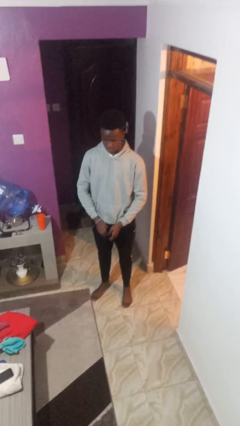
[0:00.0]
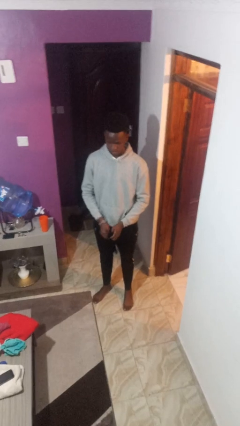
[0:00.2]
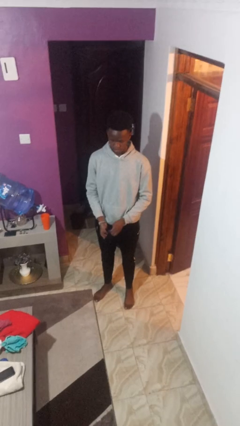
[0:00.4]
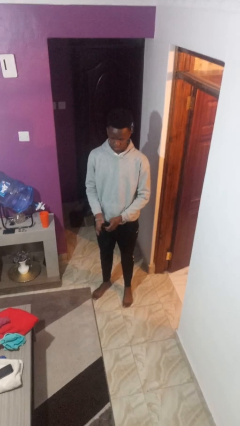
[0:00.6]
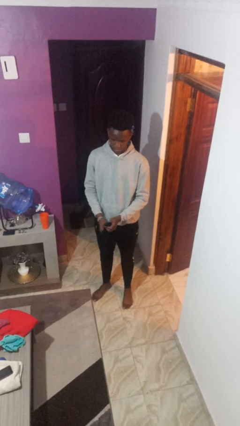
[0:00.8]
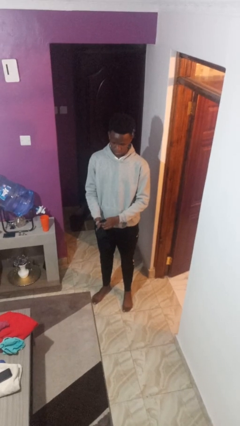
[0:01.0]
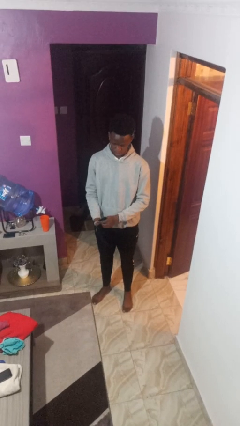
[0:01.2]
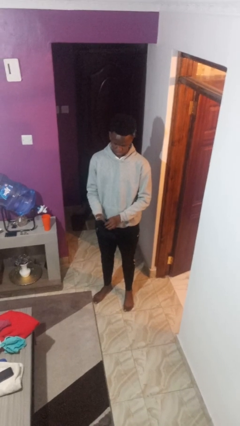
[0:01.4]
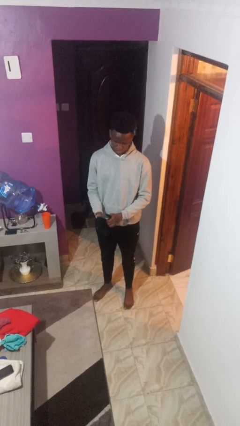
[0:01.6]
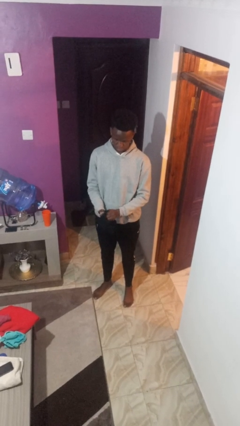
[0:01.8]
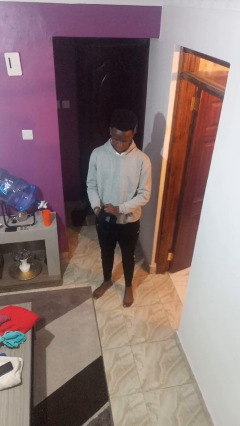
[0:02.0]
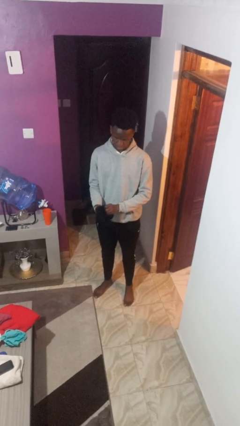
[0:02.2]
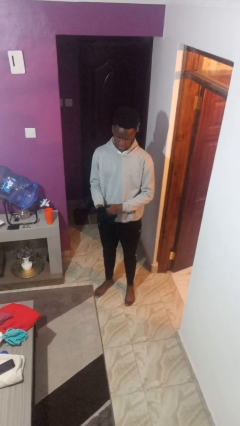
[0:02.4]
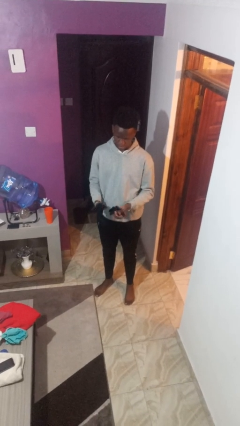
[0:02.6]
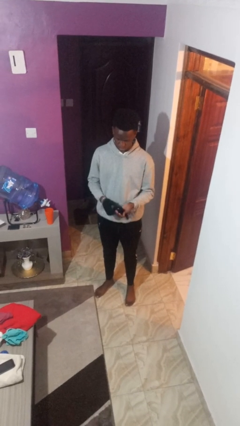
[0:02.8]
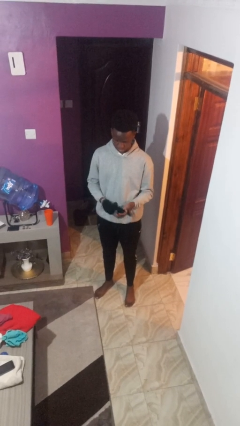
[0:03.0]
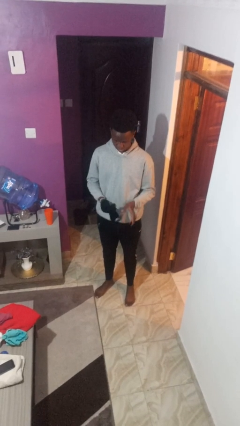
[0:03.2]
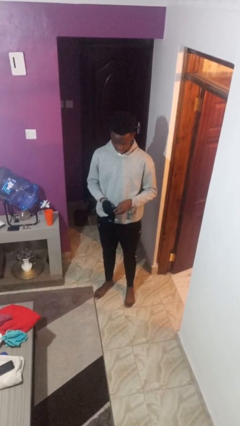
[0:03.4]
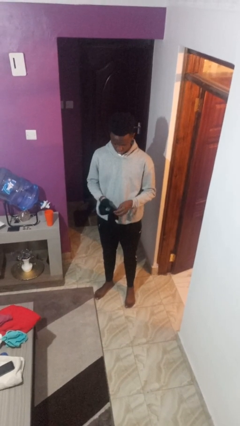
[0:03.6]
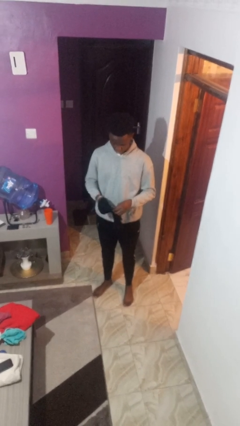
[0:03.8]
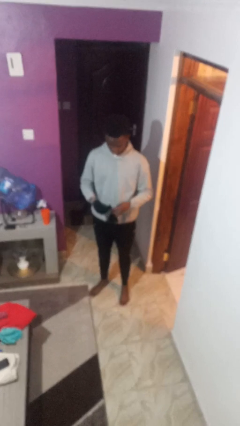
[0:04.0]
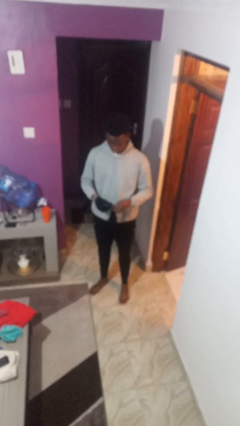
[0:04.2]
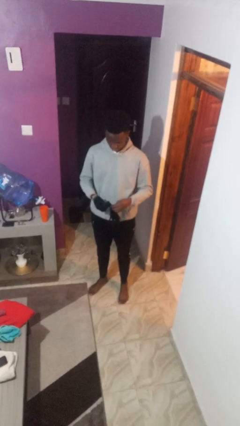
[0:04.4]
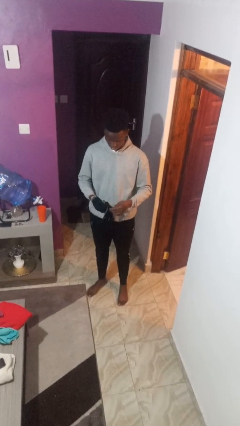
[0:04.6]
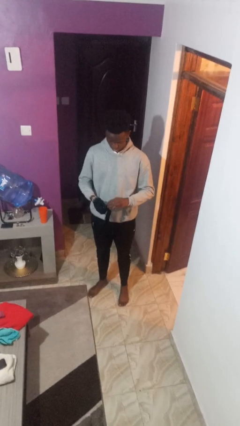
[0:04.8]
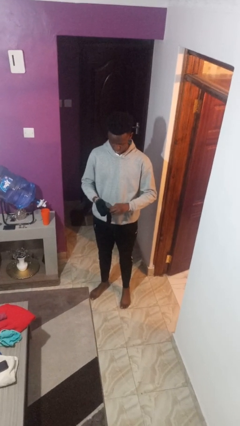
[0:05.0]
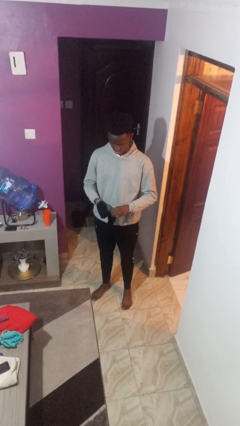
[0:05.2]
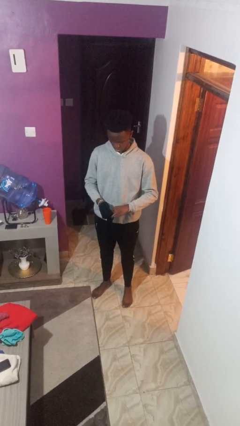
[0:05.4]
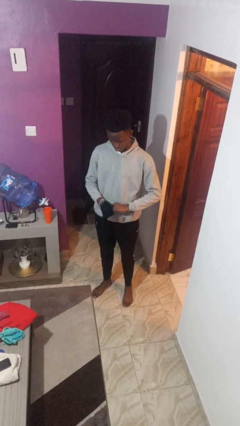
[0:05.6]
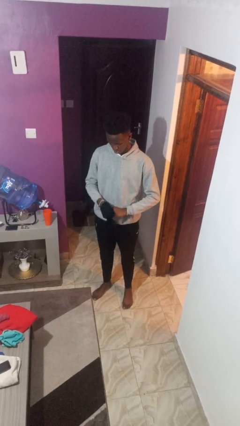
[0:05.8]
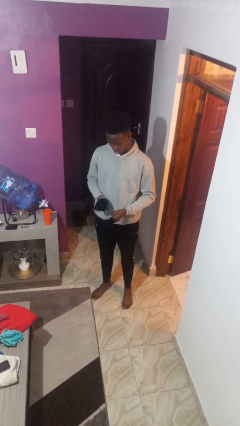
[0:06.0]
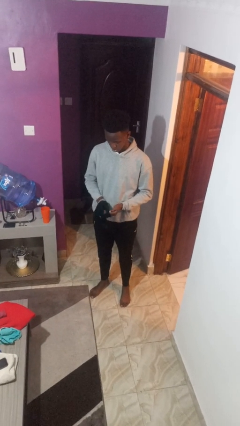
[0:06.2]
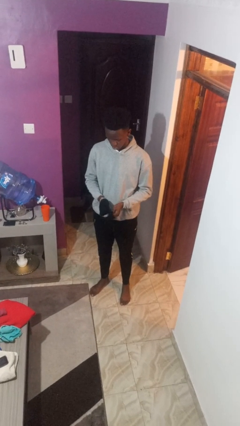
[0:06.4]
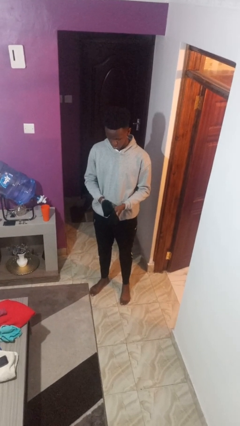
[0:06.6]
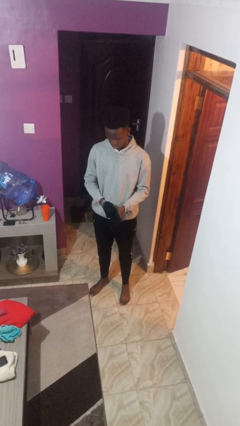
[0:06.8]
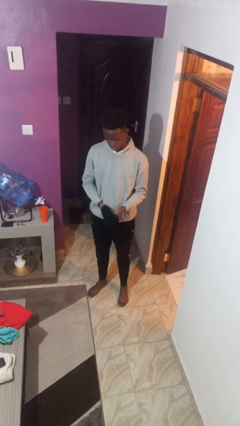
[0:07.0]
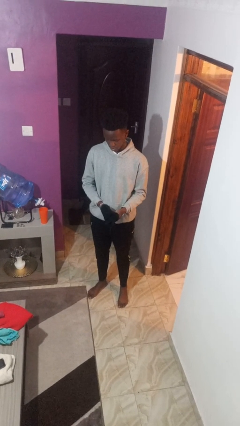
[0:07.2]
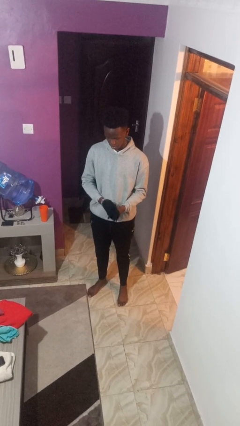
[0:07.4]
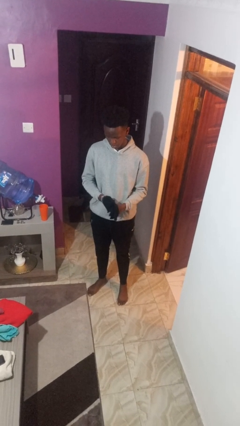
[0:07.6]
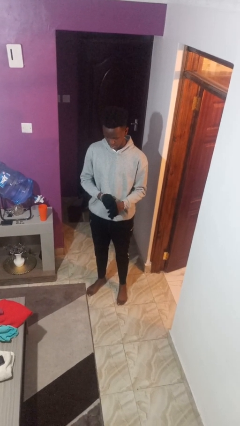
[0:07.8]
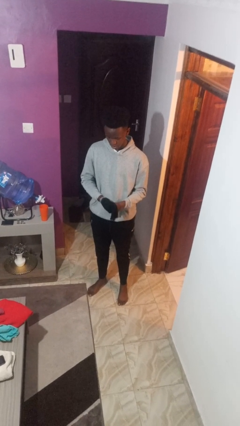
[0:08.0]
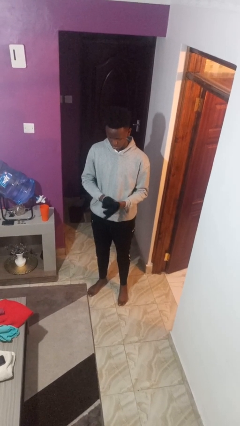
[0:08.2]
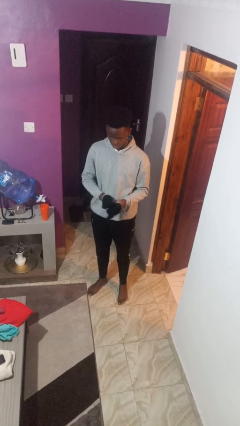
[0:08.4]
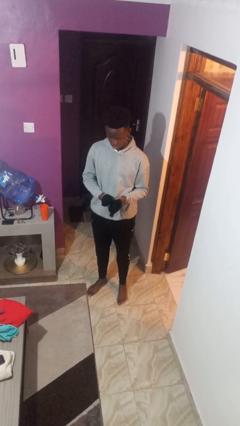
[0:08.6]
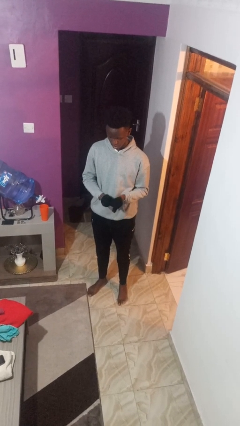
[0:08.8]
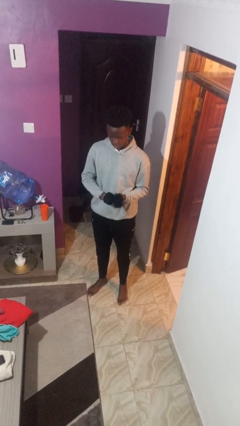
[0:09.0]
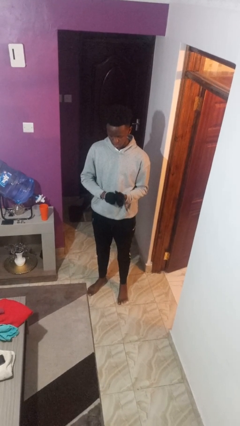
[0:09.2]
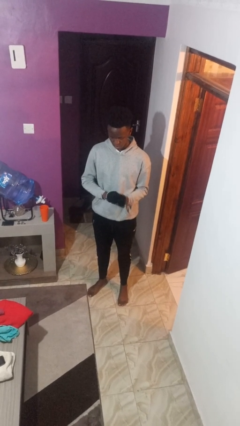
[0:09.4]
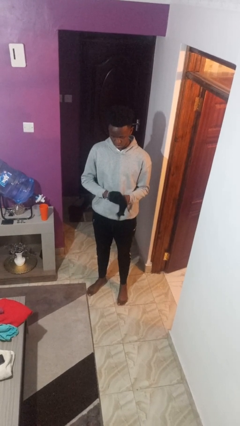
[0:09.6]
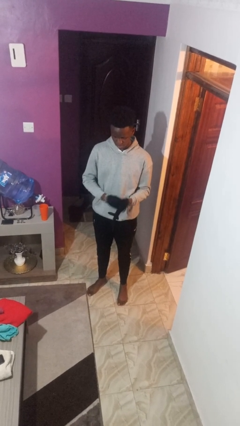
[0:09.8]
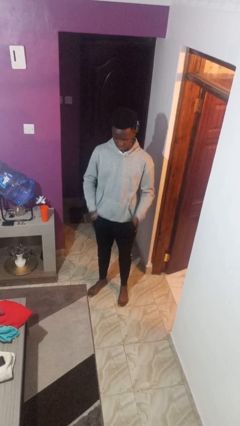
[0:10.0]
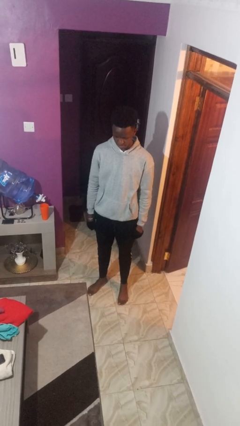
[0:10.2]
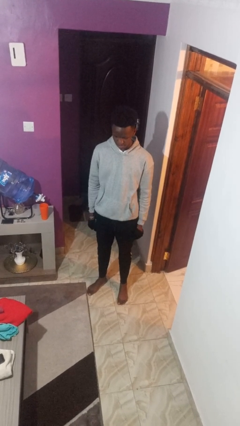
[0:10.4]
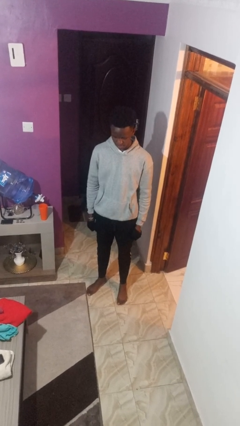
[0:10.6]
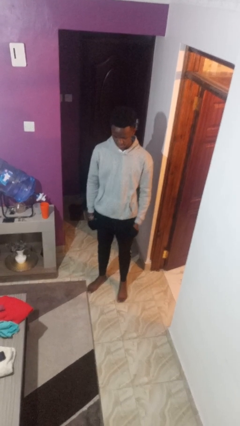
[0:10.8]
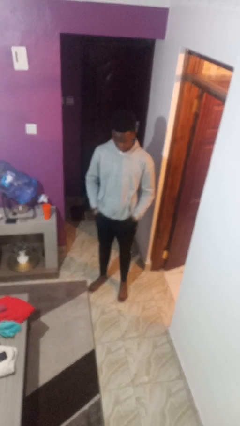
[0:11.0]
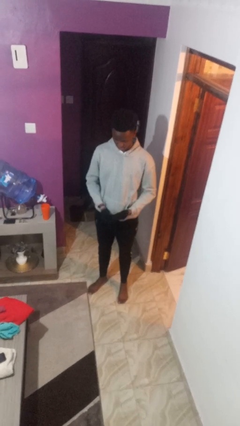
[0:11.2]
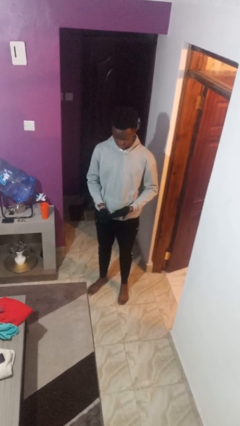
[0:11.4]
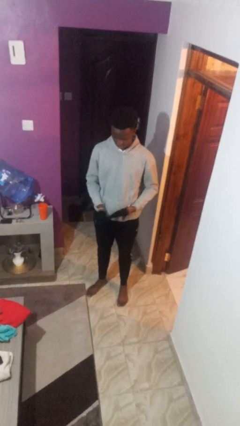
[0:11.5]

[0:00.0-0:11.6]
person puts on gloves

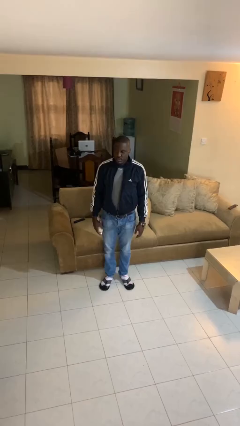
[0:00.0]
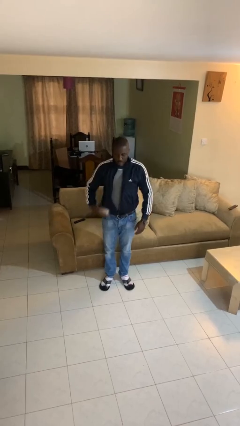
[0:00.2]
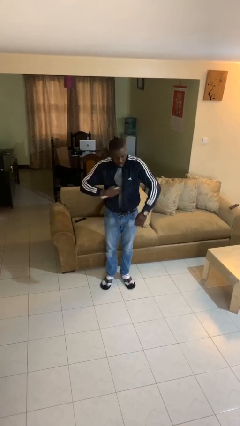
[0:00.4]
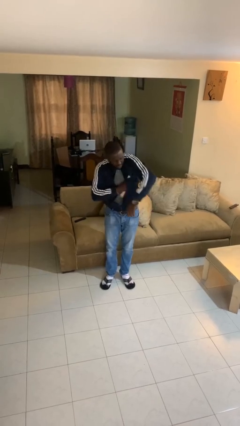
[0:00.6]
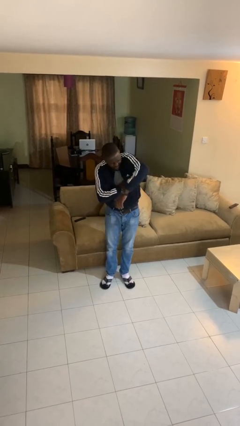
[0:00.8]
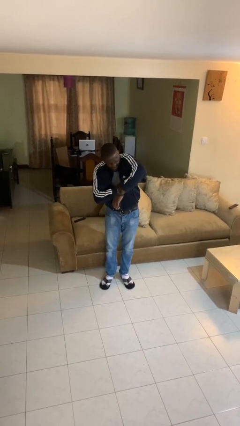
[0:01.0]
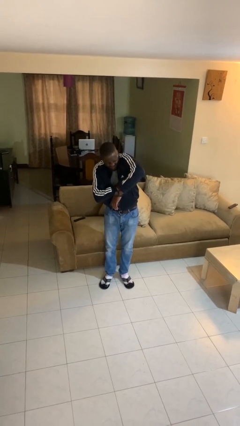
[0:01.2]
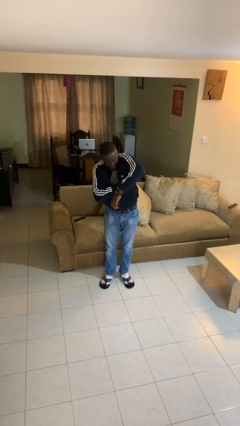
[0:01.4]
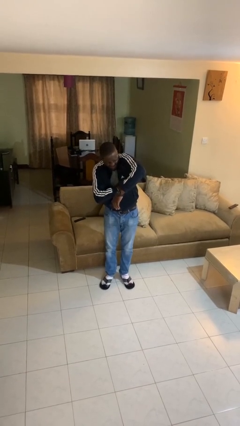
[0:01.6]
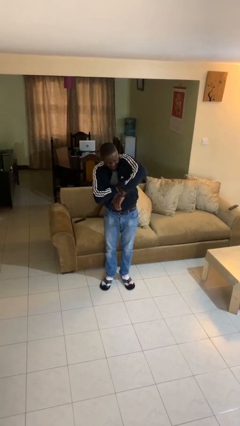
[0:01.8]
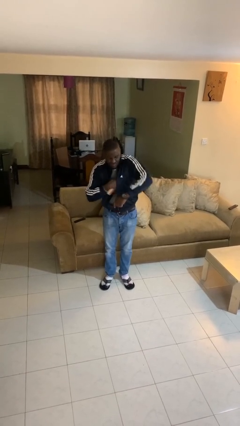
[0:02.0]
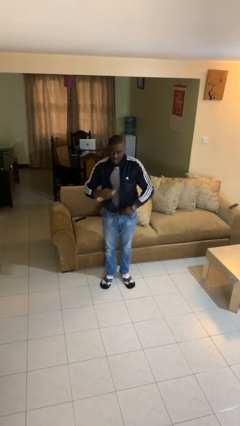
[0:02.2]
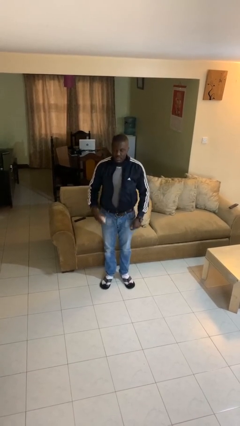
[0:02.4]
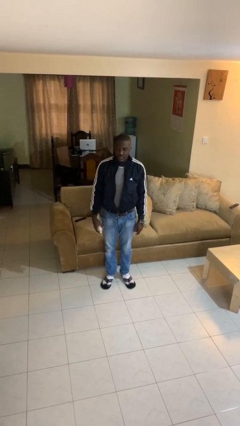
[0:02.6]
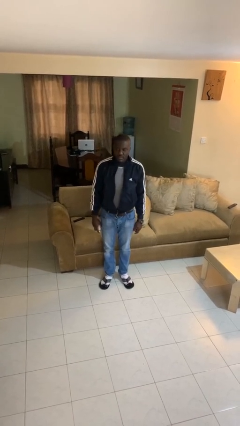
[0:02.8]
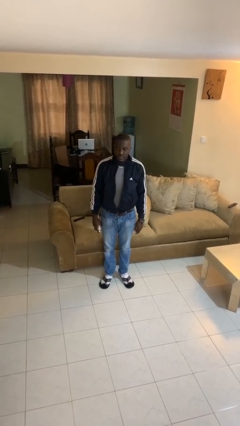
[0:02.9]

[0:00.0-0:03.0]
person applies deodorant

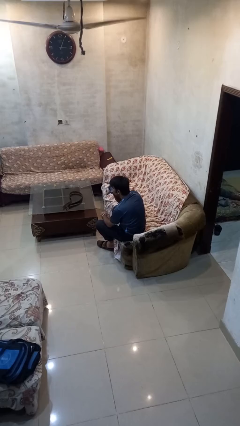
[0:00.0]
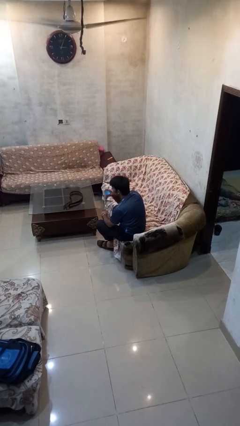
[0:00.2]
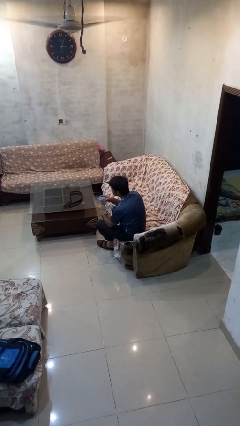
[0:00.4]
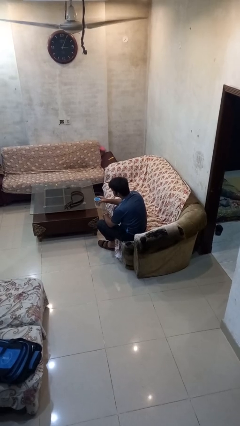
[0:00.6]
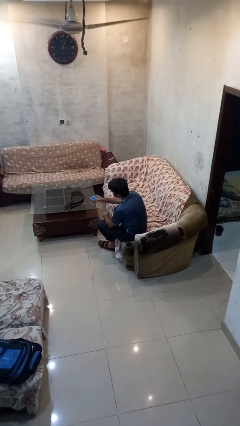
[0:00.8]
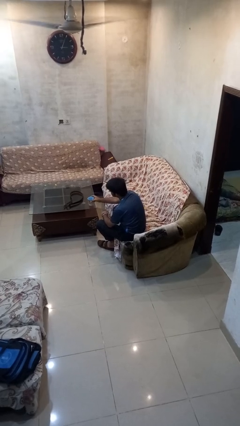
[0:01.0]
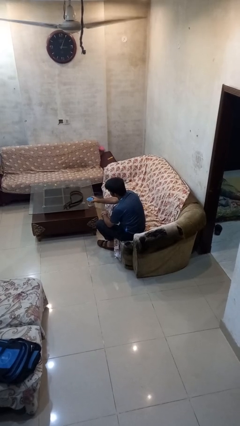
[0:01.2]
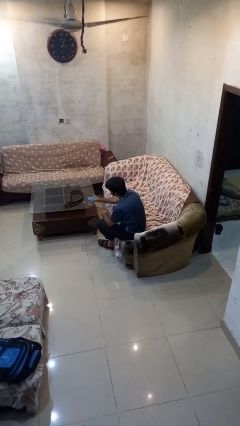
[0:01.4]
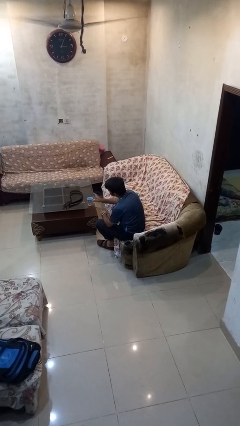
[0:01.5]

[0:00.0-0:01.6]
person puts down object on table

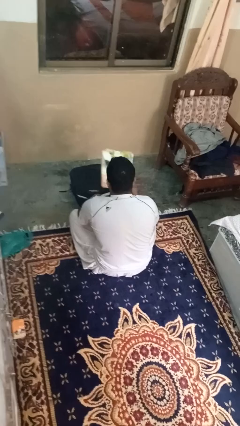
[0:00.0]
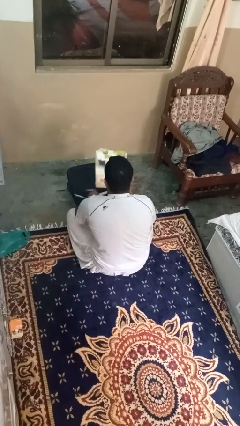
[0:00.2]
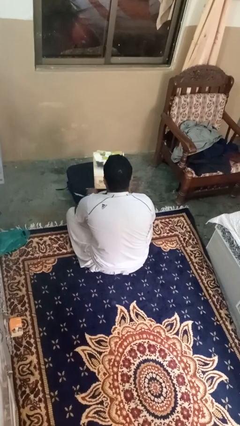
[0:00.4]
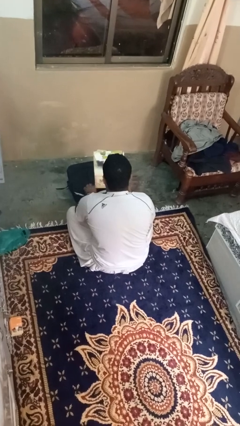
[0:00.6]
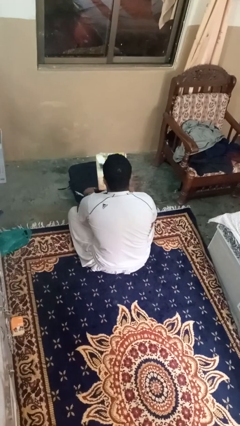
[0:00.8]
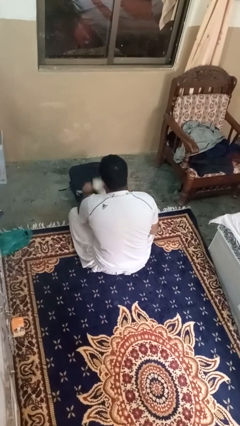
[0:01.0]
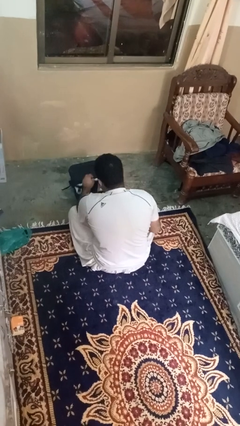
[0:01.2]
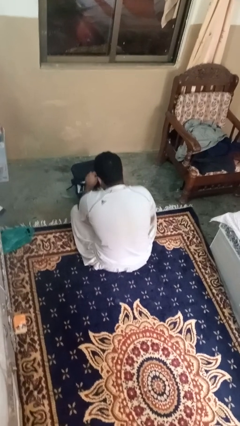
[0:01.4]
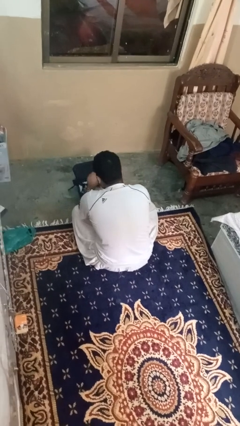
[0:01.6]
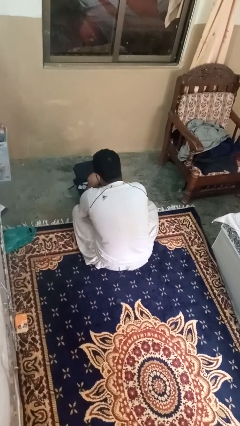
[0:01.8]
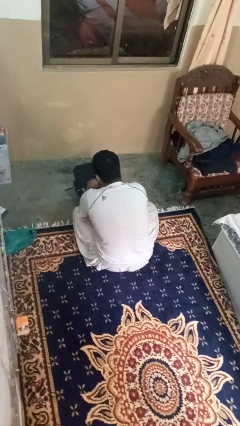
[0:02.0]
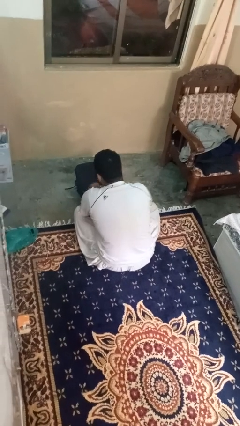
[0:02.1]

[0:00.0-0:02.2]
person puts object into bag
